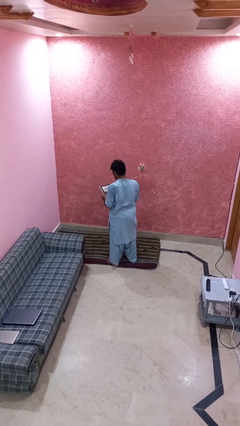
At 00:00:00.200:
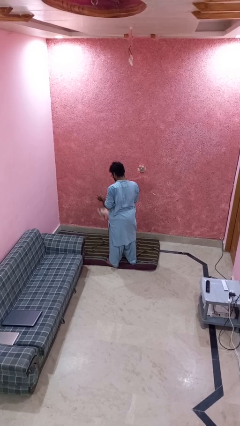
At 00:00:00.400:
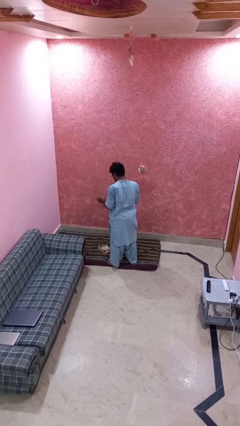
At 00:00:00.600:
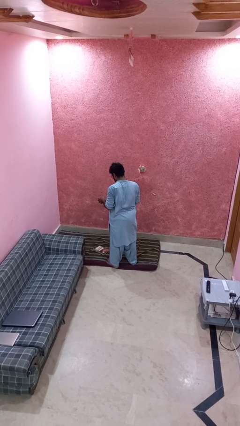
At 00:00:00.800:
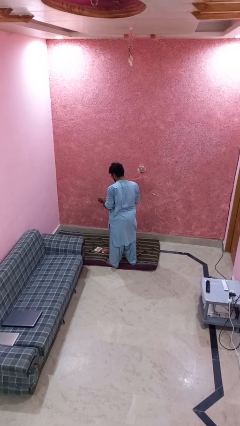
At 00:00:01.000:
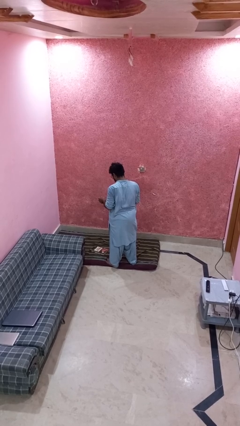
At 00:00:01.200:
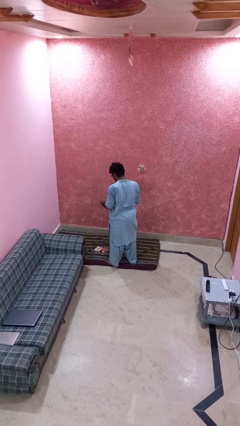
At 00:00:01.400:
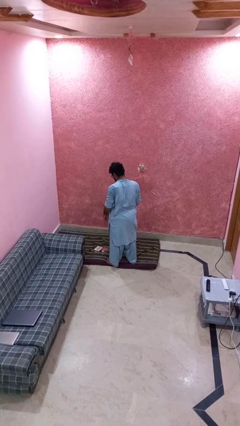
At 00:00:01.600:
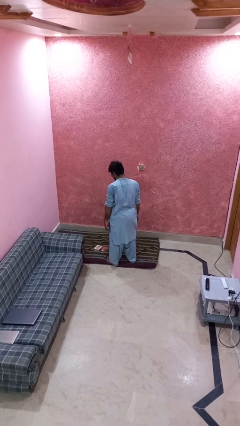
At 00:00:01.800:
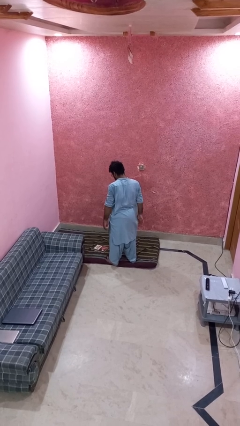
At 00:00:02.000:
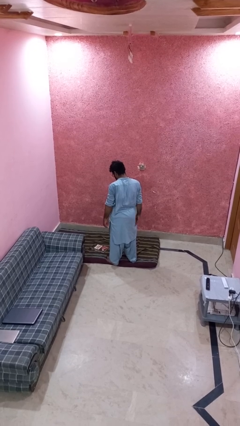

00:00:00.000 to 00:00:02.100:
person drops object

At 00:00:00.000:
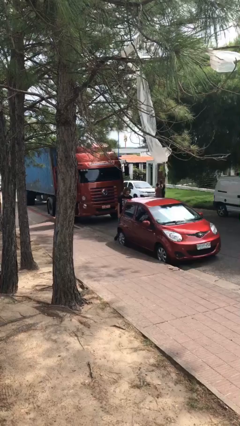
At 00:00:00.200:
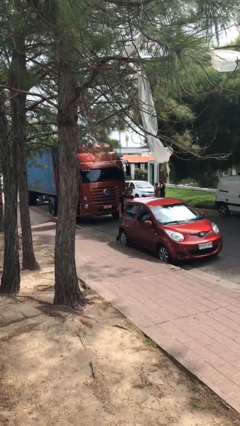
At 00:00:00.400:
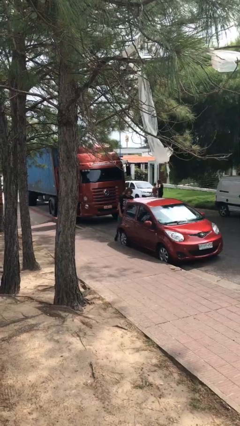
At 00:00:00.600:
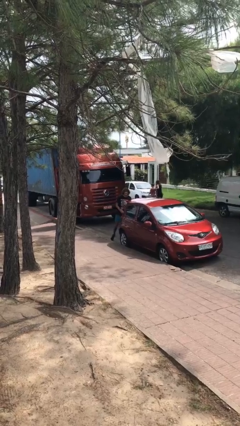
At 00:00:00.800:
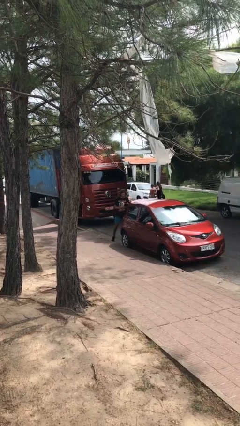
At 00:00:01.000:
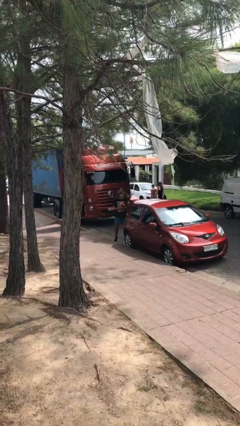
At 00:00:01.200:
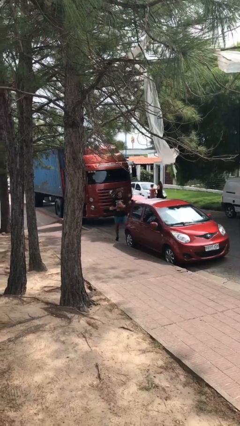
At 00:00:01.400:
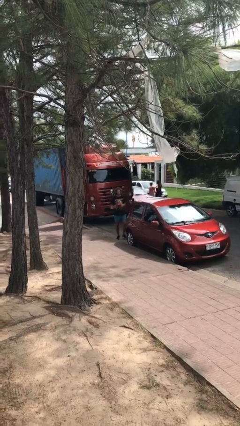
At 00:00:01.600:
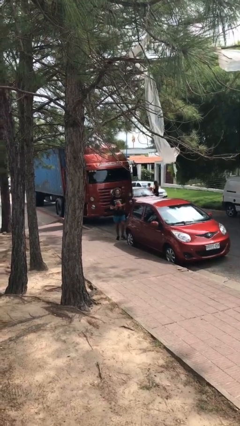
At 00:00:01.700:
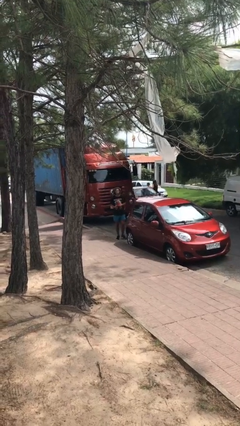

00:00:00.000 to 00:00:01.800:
person unloads car

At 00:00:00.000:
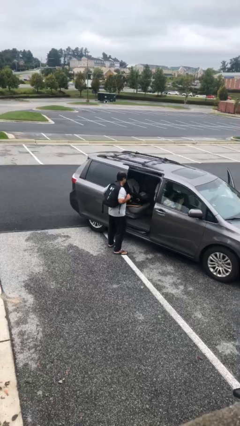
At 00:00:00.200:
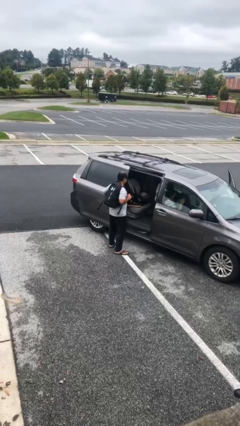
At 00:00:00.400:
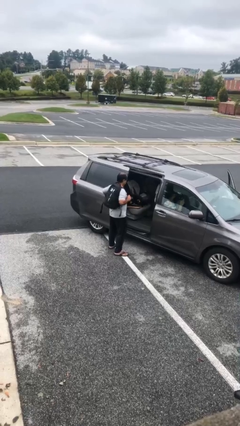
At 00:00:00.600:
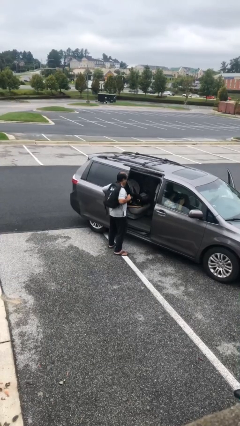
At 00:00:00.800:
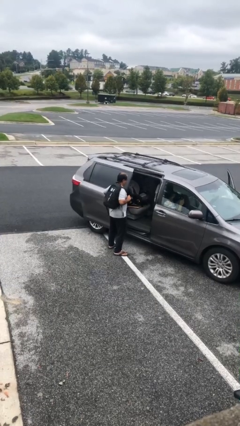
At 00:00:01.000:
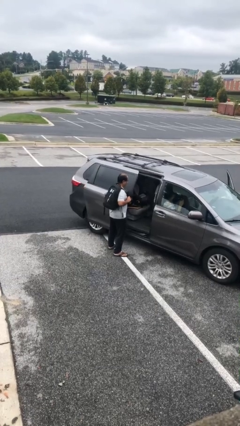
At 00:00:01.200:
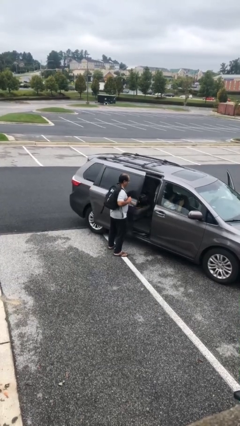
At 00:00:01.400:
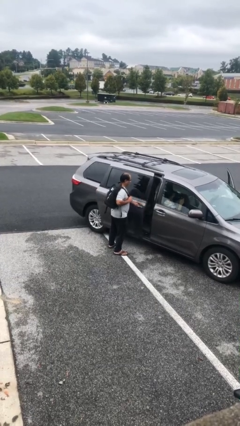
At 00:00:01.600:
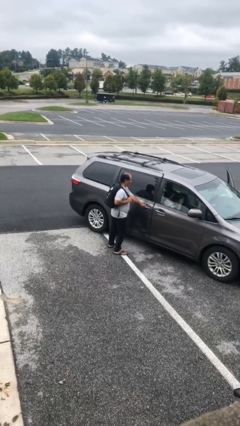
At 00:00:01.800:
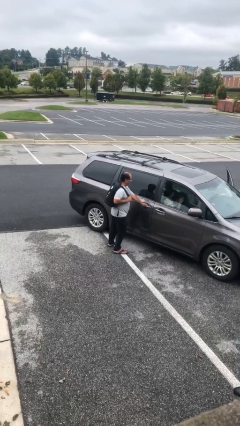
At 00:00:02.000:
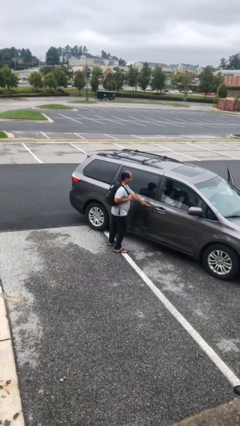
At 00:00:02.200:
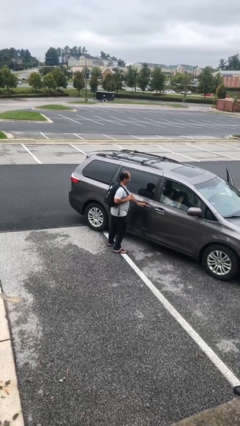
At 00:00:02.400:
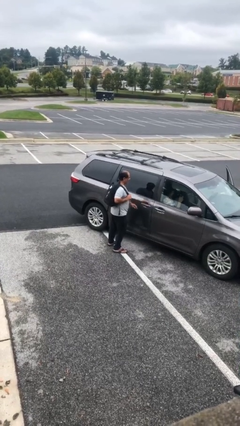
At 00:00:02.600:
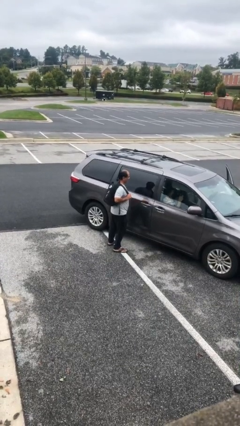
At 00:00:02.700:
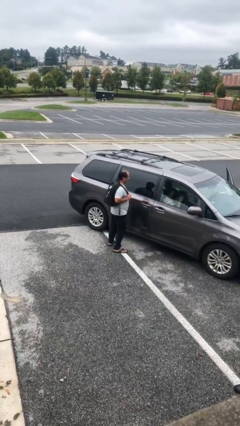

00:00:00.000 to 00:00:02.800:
person closes car door

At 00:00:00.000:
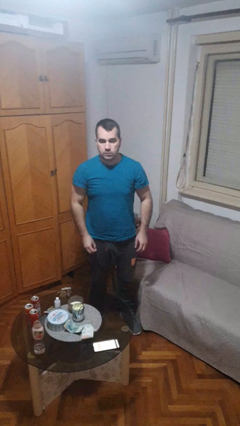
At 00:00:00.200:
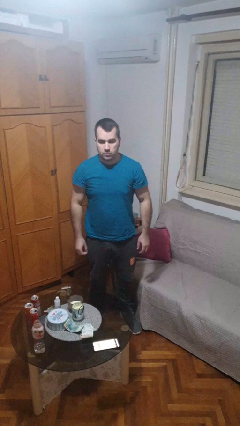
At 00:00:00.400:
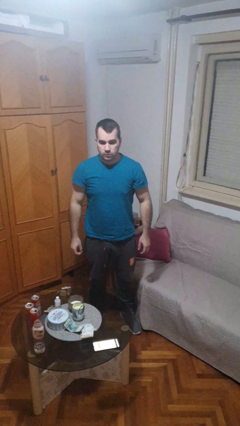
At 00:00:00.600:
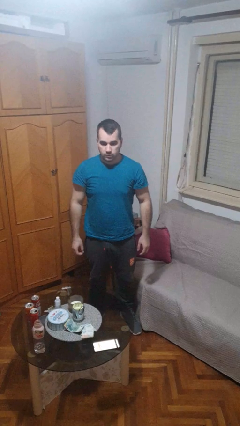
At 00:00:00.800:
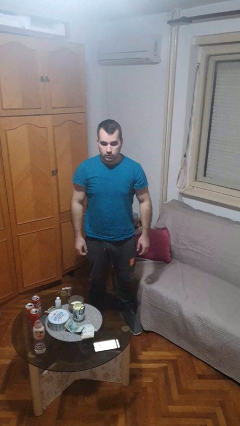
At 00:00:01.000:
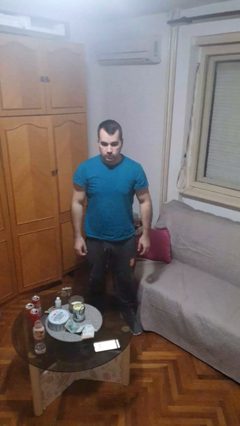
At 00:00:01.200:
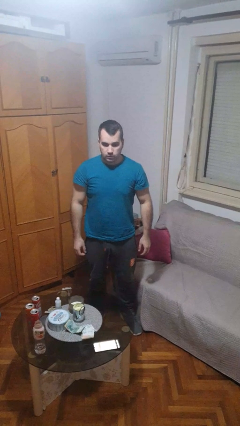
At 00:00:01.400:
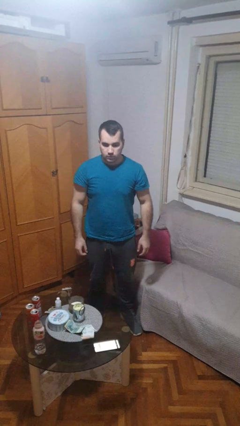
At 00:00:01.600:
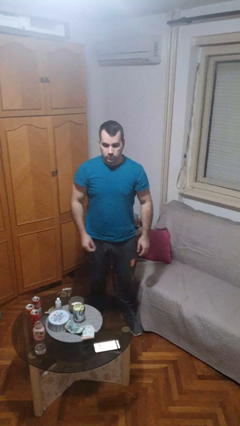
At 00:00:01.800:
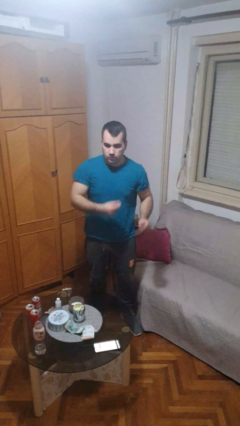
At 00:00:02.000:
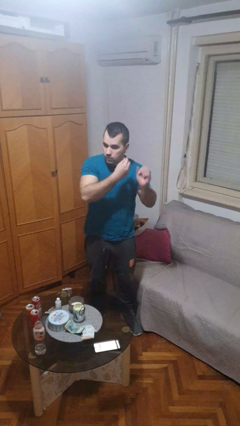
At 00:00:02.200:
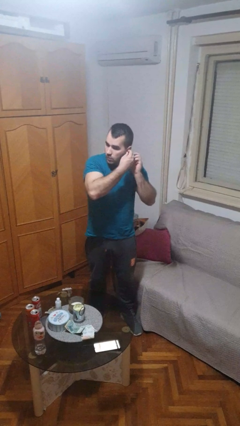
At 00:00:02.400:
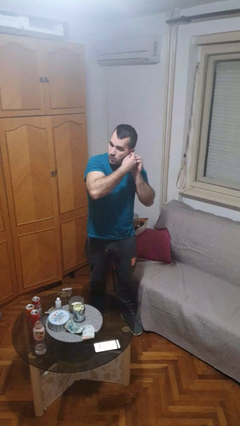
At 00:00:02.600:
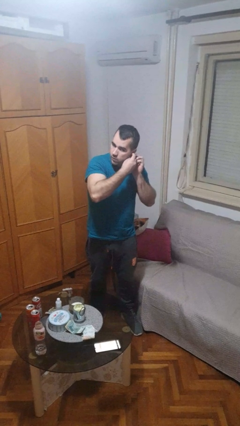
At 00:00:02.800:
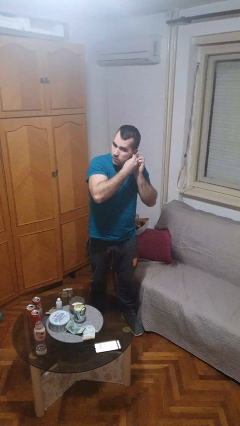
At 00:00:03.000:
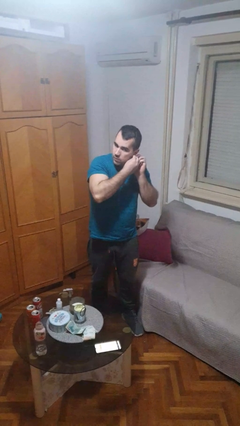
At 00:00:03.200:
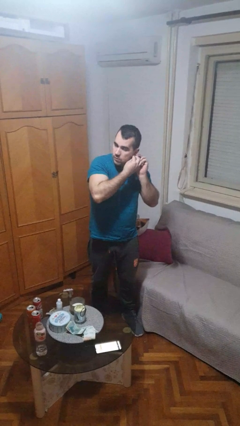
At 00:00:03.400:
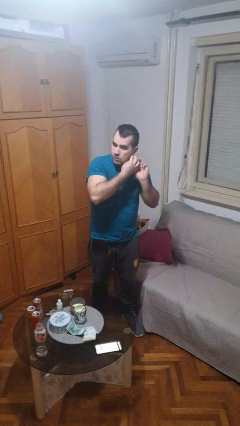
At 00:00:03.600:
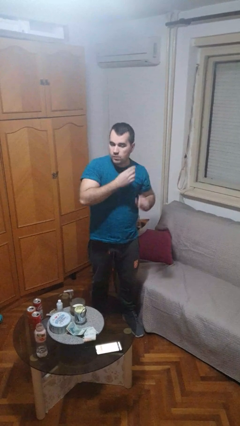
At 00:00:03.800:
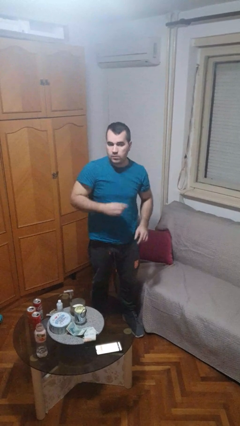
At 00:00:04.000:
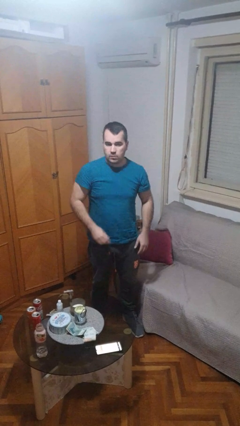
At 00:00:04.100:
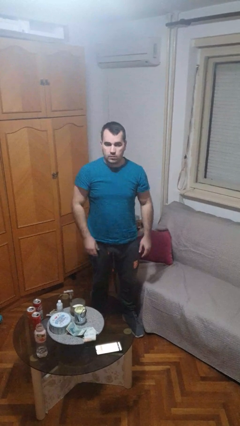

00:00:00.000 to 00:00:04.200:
person puts on earrings

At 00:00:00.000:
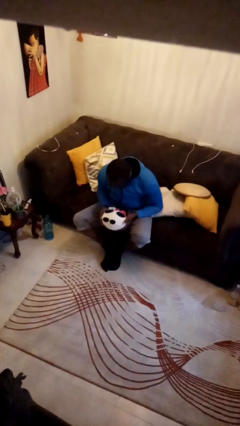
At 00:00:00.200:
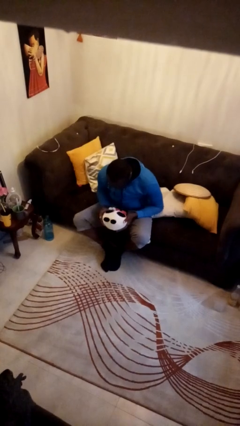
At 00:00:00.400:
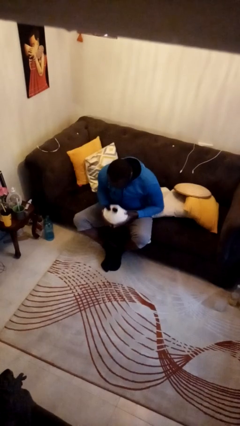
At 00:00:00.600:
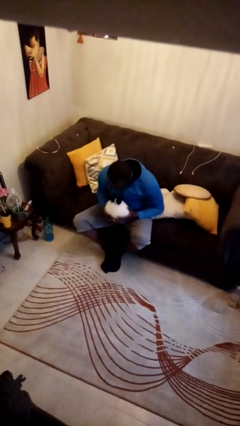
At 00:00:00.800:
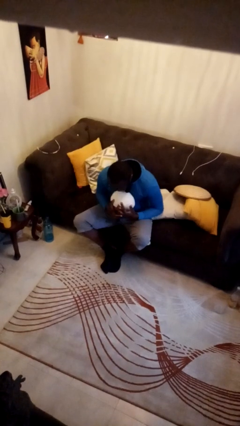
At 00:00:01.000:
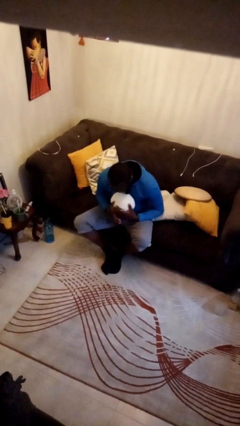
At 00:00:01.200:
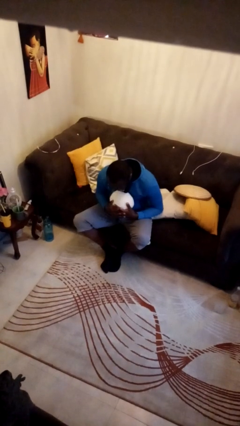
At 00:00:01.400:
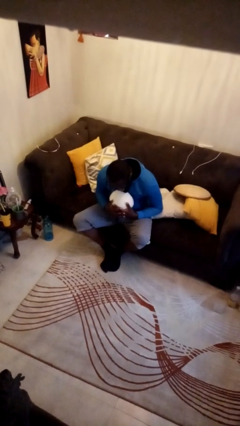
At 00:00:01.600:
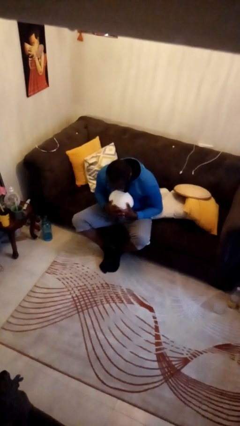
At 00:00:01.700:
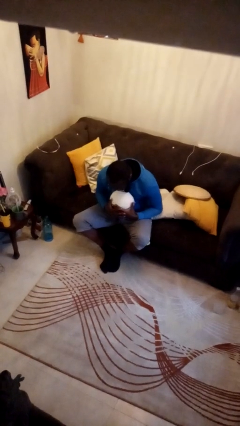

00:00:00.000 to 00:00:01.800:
person hugs stuffed animal

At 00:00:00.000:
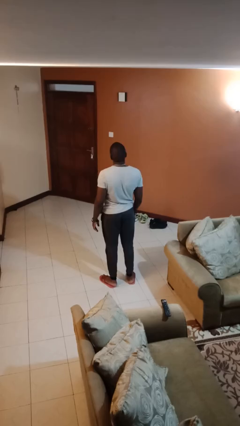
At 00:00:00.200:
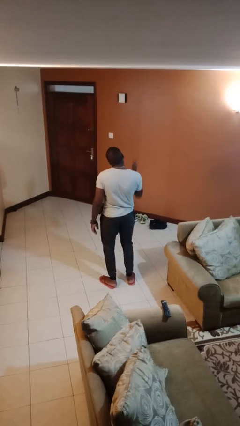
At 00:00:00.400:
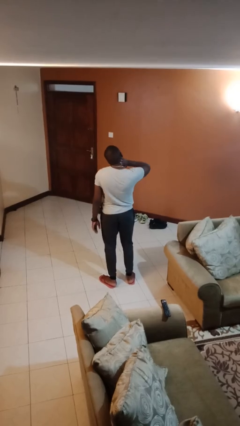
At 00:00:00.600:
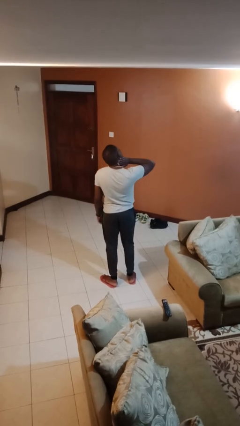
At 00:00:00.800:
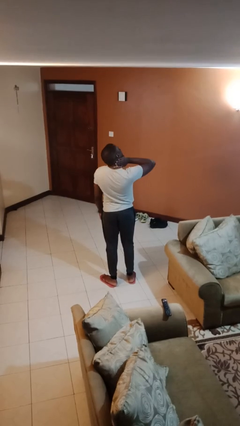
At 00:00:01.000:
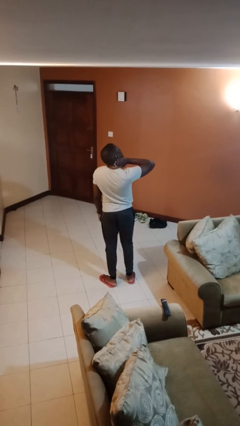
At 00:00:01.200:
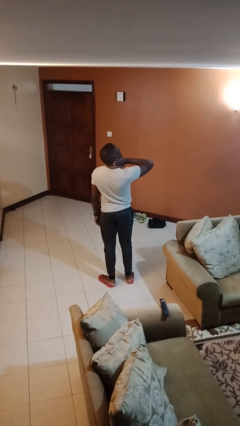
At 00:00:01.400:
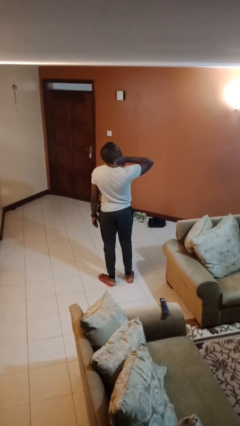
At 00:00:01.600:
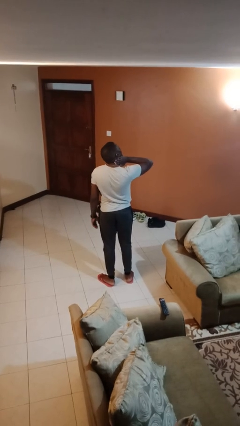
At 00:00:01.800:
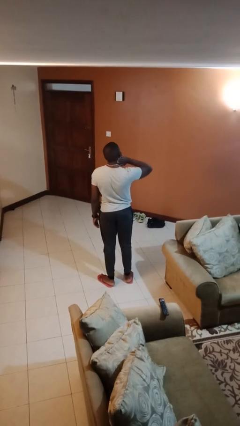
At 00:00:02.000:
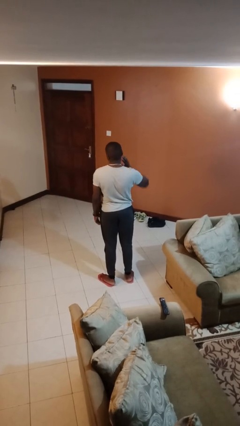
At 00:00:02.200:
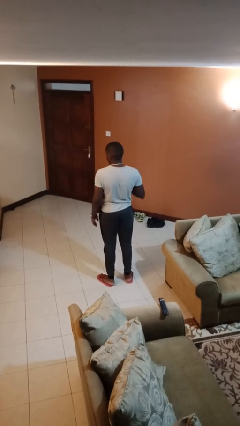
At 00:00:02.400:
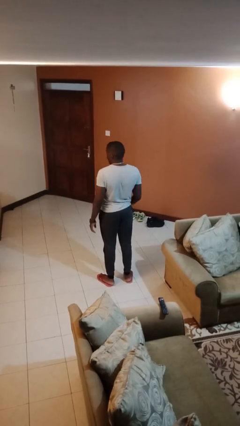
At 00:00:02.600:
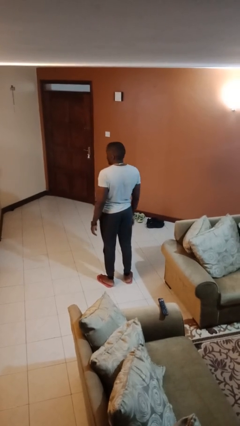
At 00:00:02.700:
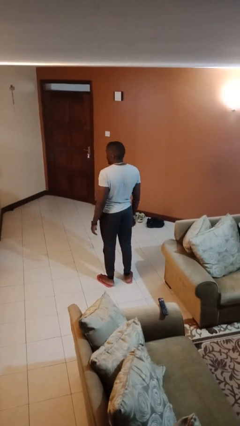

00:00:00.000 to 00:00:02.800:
person swats bug

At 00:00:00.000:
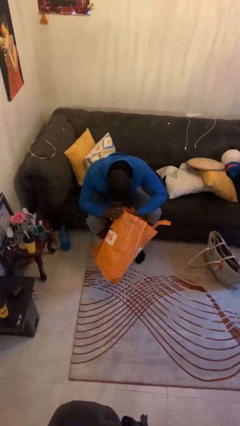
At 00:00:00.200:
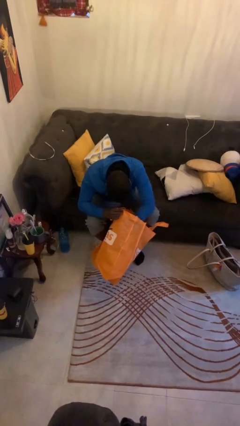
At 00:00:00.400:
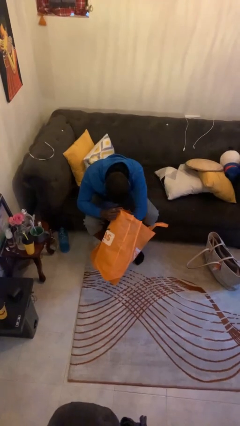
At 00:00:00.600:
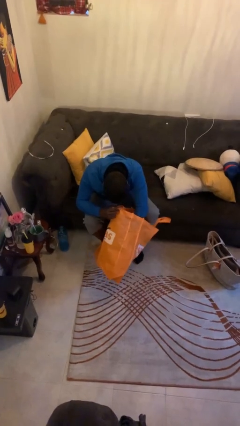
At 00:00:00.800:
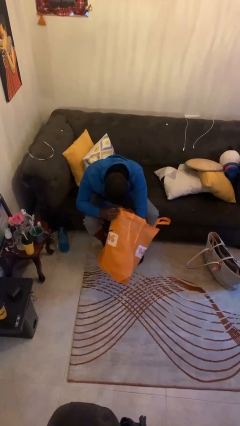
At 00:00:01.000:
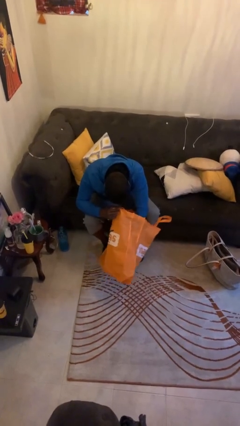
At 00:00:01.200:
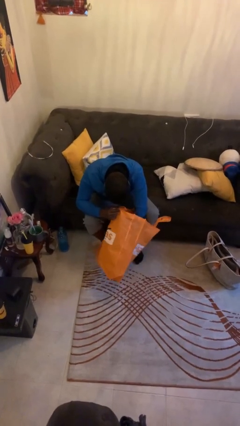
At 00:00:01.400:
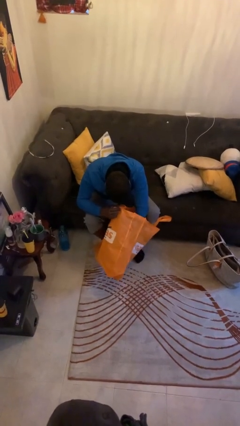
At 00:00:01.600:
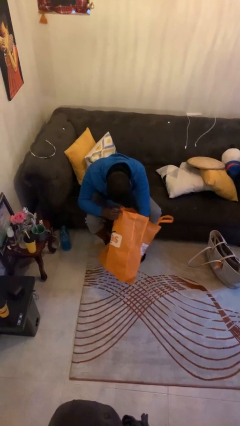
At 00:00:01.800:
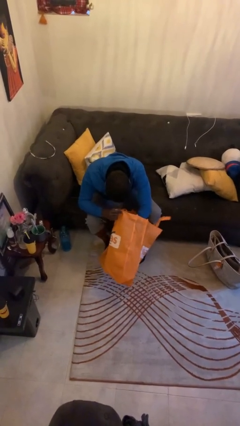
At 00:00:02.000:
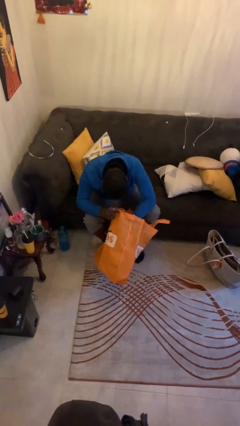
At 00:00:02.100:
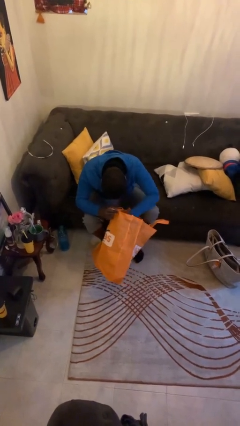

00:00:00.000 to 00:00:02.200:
person searches in bag
